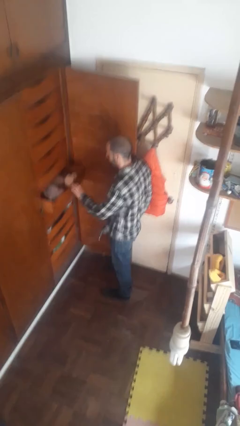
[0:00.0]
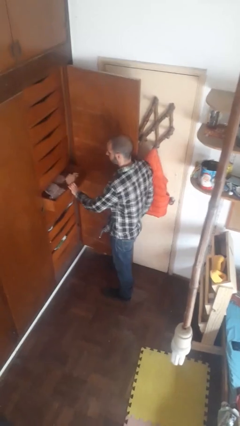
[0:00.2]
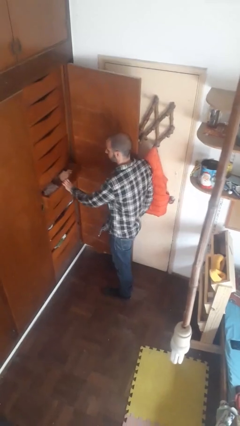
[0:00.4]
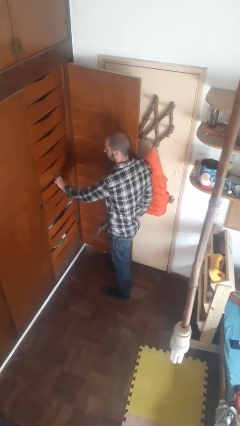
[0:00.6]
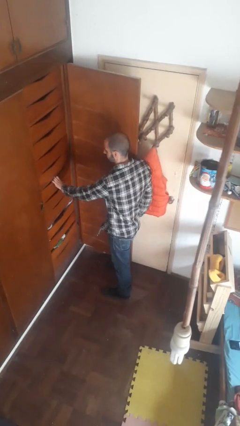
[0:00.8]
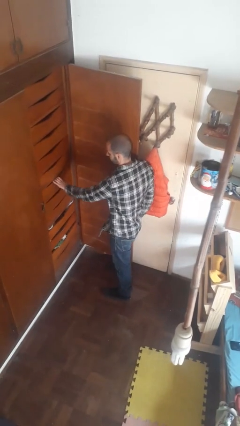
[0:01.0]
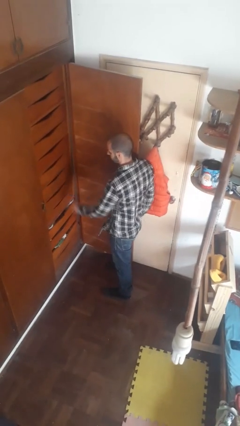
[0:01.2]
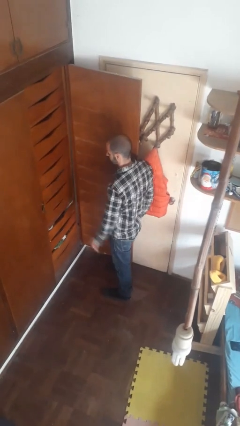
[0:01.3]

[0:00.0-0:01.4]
person closes dresser drawer

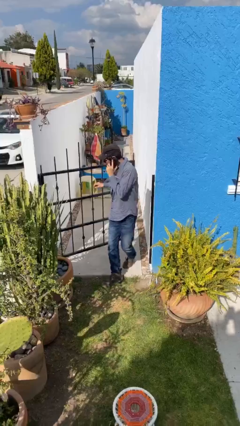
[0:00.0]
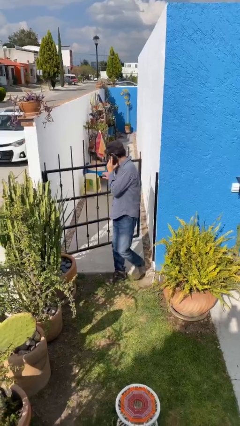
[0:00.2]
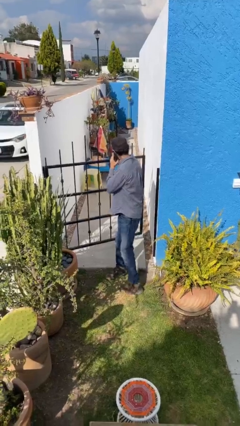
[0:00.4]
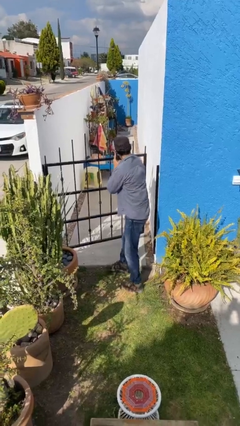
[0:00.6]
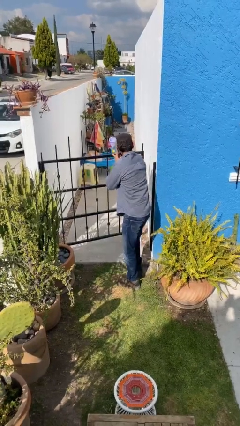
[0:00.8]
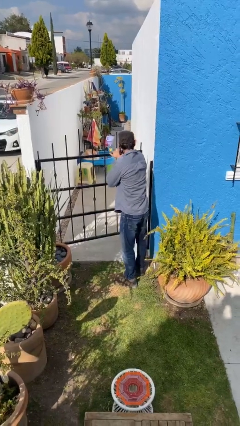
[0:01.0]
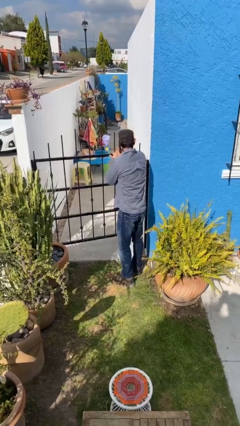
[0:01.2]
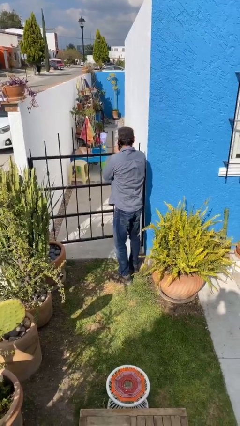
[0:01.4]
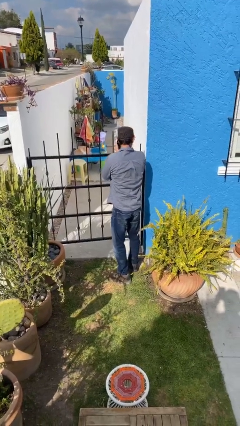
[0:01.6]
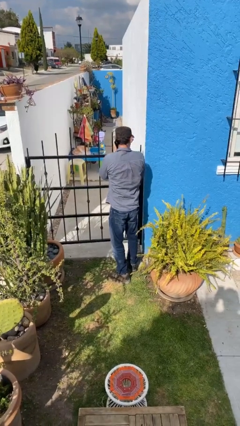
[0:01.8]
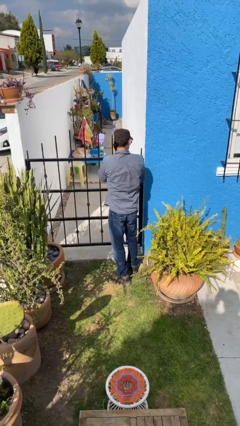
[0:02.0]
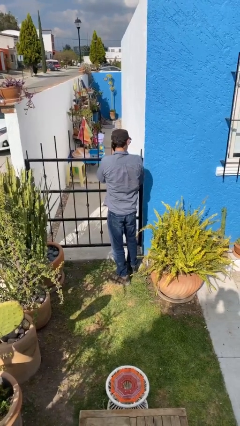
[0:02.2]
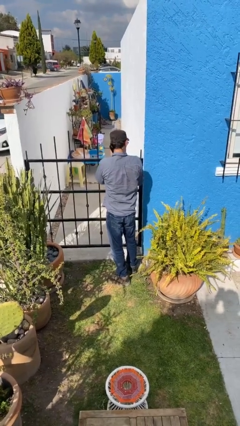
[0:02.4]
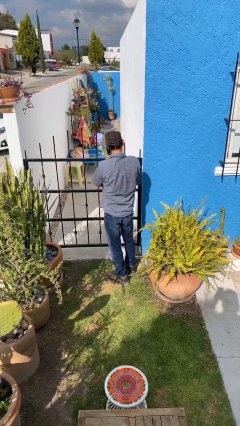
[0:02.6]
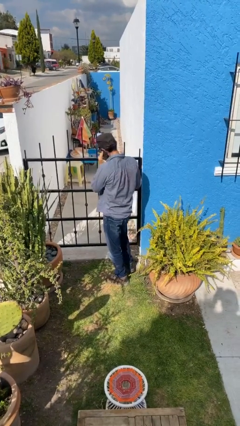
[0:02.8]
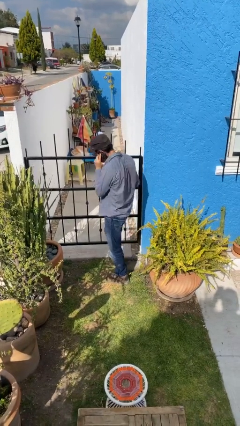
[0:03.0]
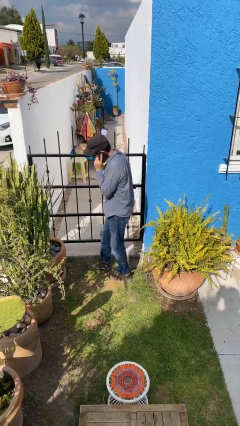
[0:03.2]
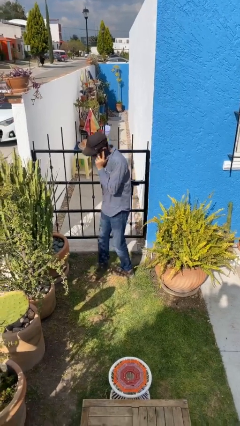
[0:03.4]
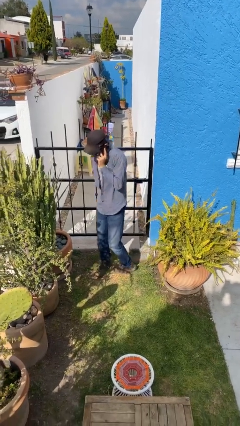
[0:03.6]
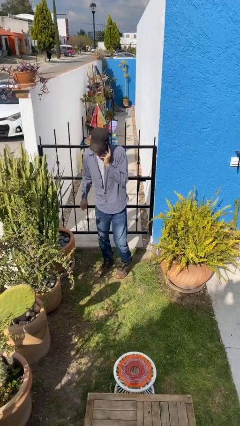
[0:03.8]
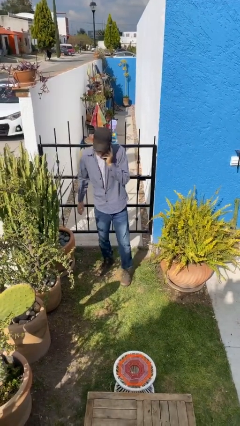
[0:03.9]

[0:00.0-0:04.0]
person closes facility door

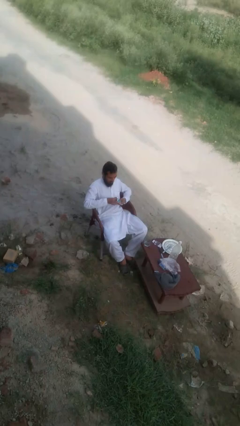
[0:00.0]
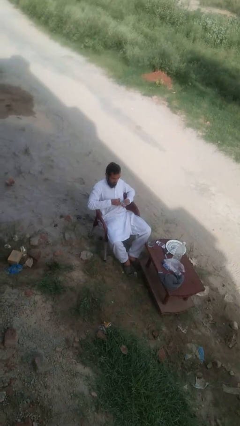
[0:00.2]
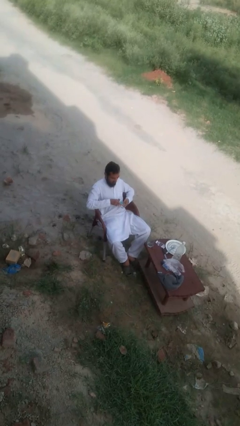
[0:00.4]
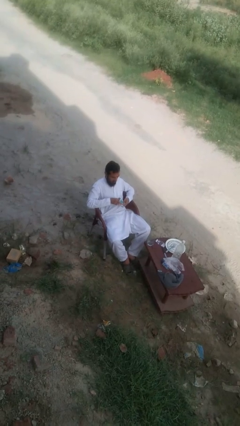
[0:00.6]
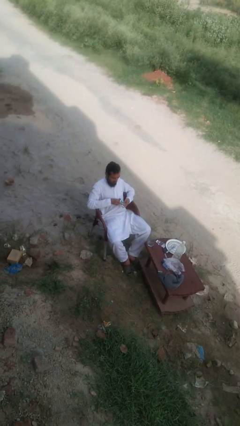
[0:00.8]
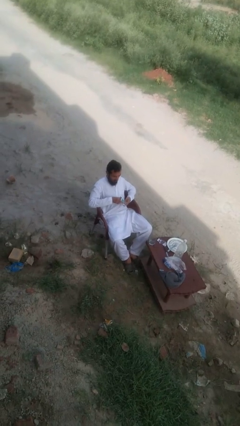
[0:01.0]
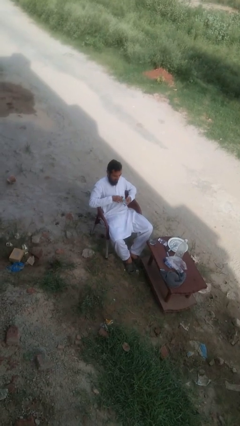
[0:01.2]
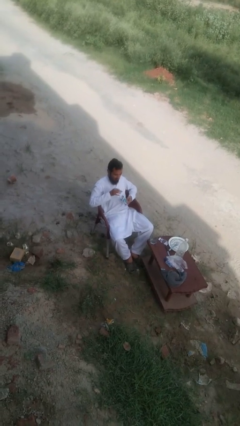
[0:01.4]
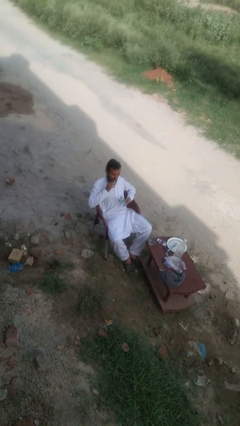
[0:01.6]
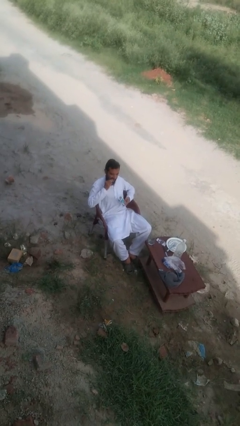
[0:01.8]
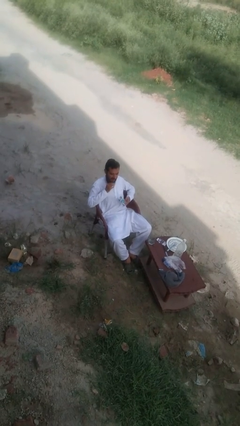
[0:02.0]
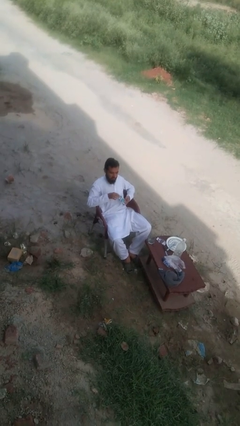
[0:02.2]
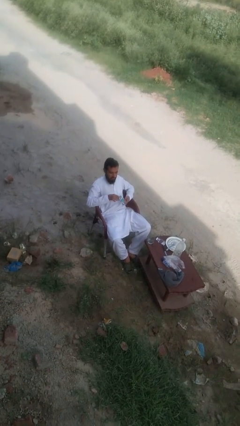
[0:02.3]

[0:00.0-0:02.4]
person eats with hands

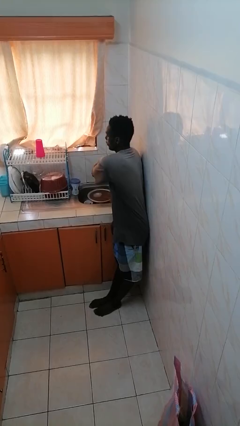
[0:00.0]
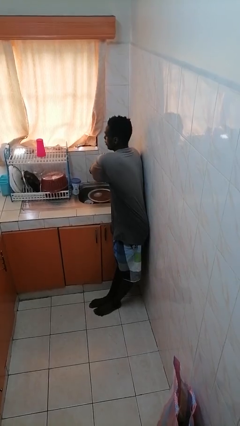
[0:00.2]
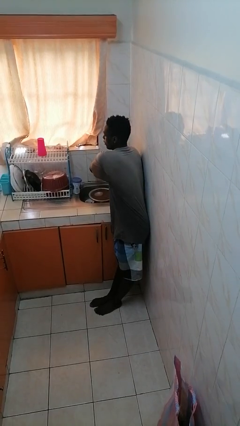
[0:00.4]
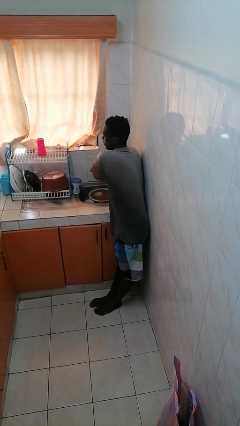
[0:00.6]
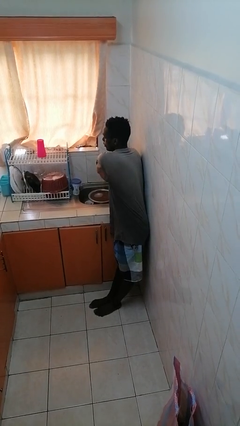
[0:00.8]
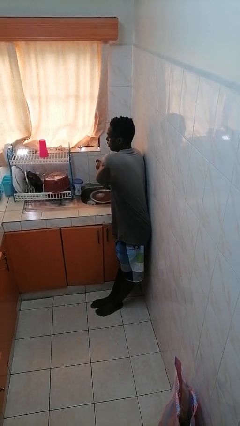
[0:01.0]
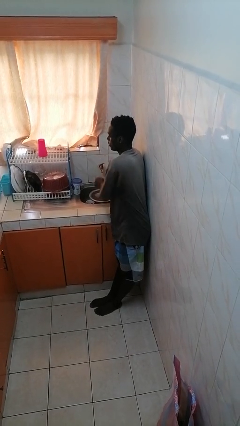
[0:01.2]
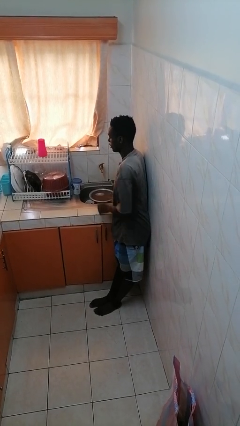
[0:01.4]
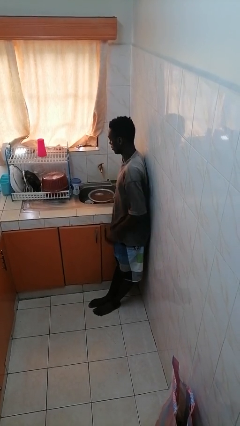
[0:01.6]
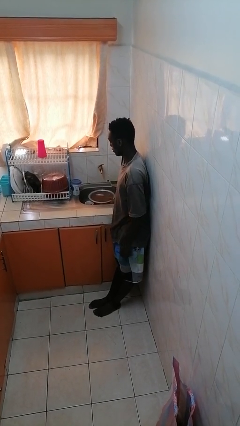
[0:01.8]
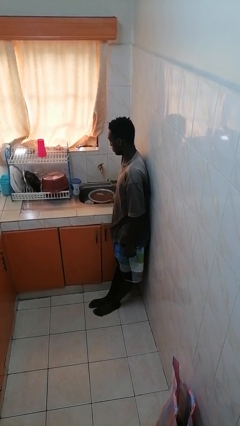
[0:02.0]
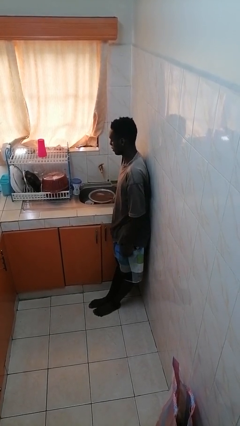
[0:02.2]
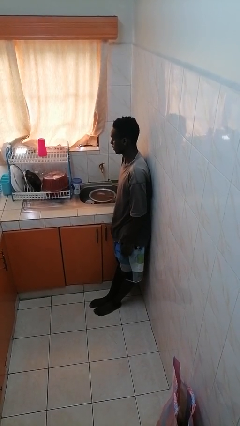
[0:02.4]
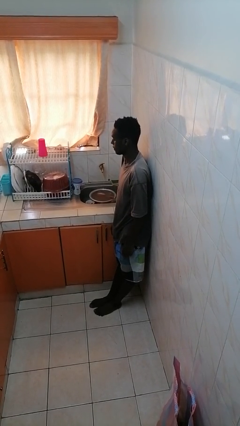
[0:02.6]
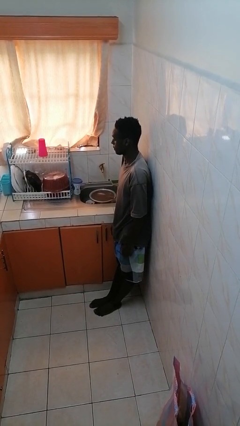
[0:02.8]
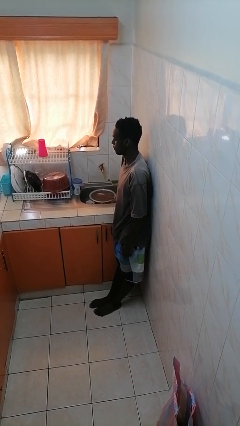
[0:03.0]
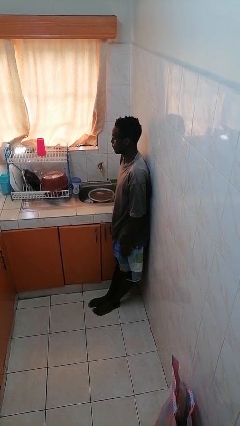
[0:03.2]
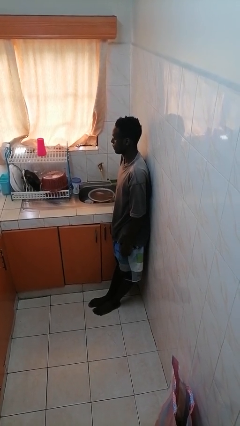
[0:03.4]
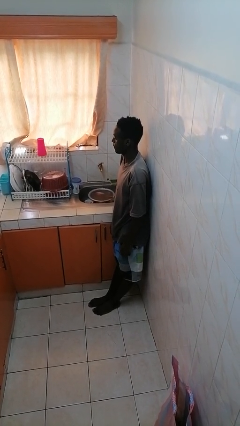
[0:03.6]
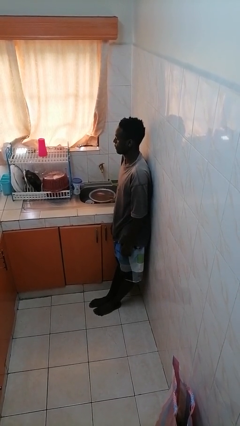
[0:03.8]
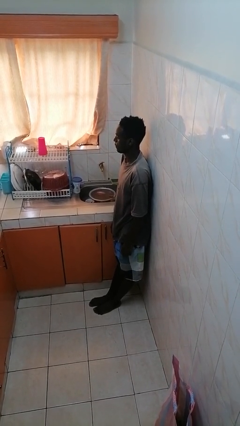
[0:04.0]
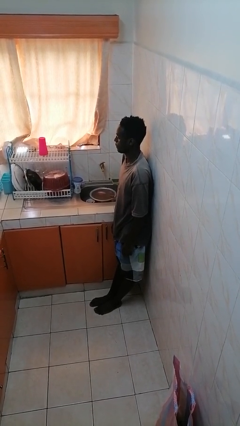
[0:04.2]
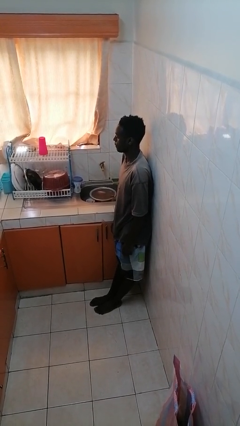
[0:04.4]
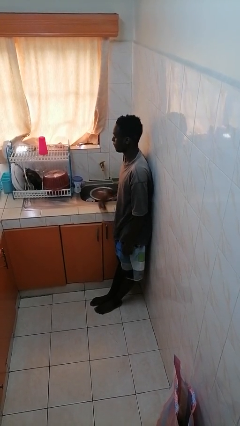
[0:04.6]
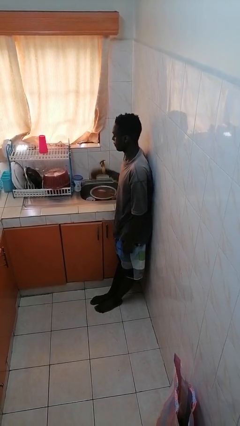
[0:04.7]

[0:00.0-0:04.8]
person turns on faucet

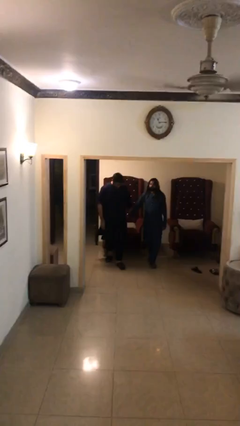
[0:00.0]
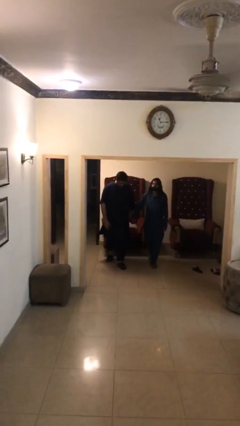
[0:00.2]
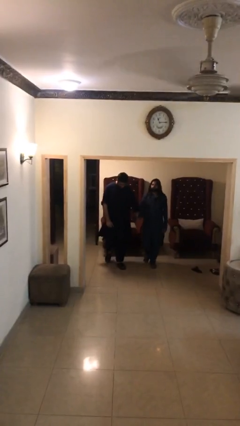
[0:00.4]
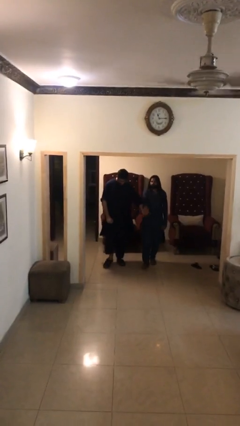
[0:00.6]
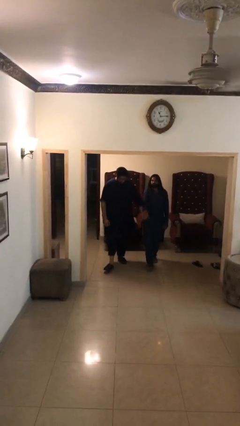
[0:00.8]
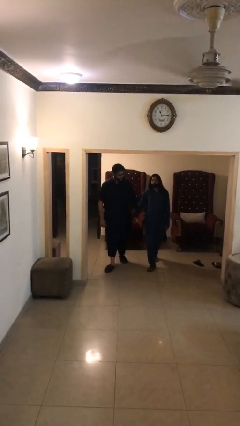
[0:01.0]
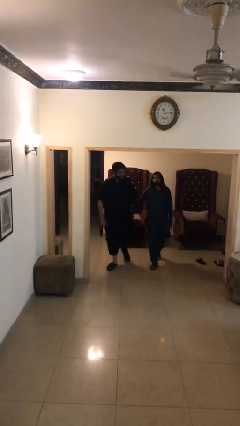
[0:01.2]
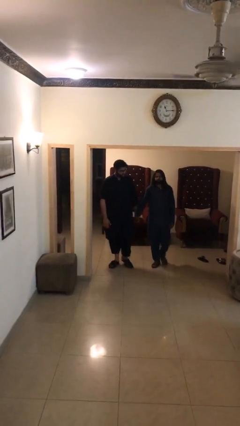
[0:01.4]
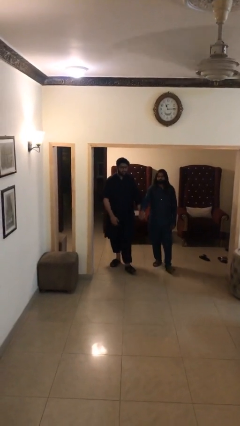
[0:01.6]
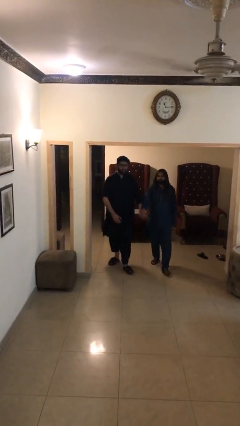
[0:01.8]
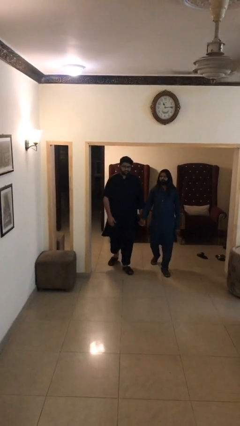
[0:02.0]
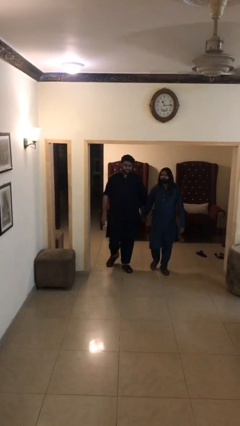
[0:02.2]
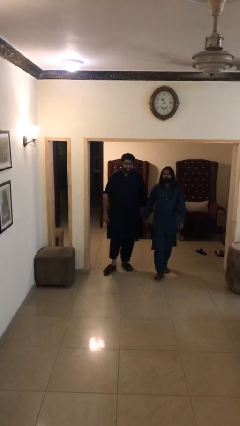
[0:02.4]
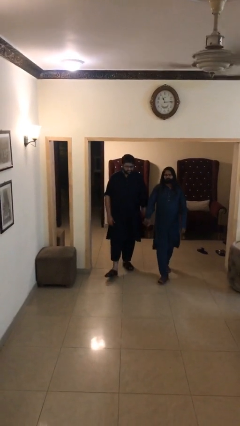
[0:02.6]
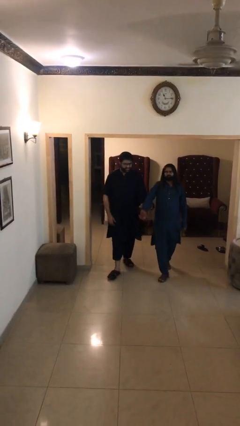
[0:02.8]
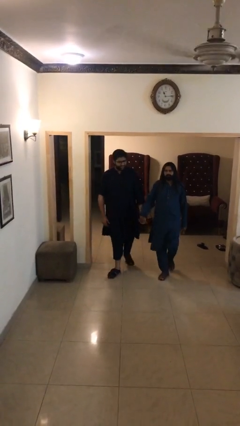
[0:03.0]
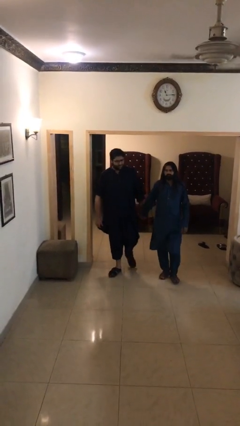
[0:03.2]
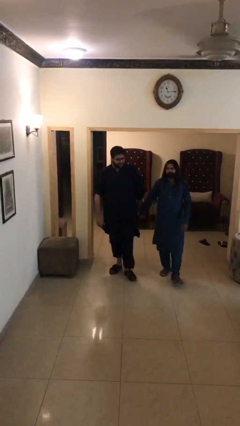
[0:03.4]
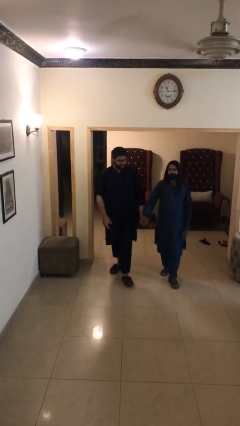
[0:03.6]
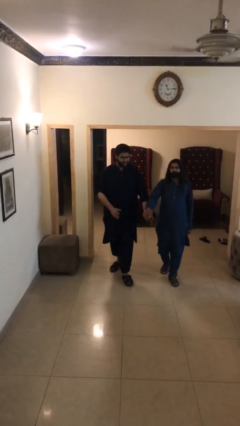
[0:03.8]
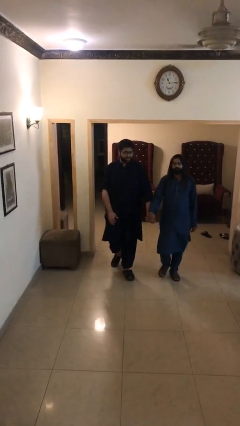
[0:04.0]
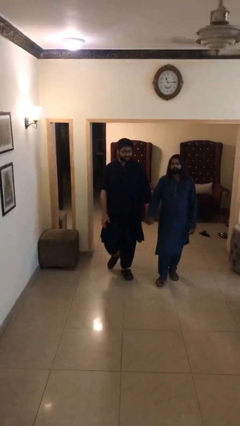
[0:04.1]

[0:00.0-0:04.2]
person holds hand

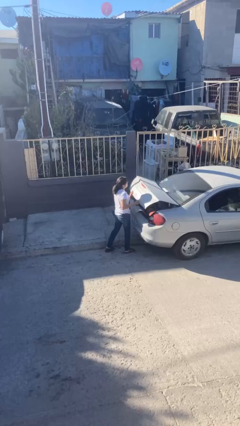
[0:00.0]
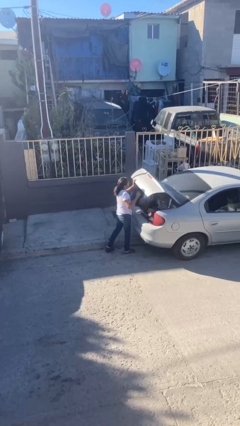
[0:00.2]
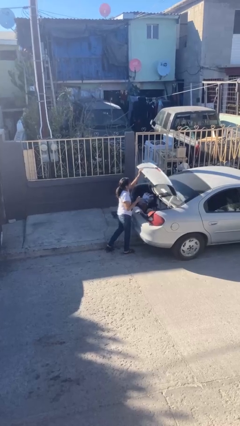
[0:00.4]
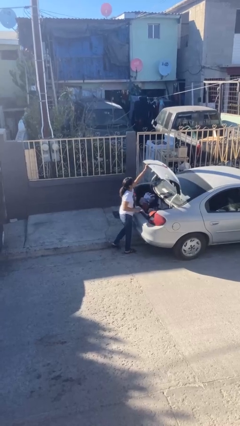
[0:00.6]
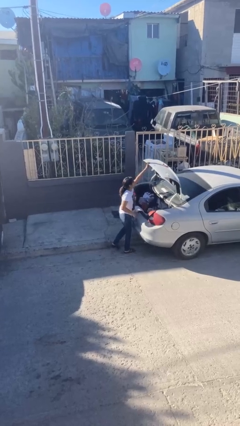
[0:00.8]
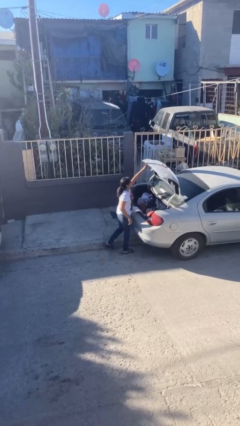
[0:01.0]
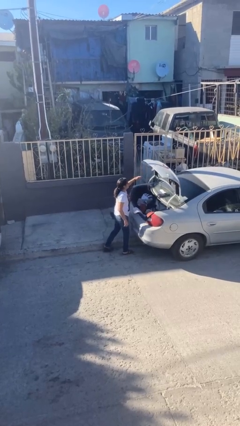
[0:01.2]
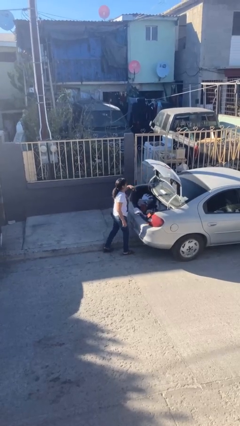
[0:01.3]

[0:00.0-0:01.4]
person opens car trunk
